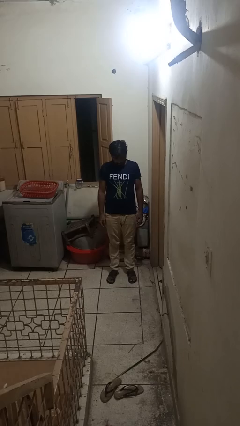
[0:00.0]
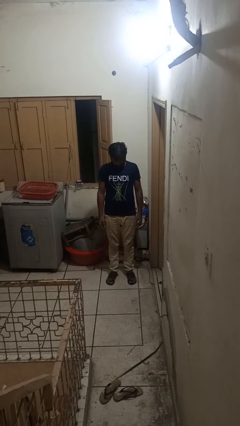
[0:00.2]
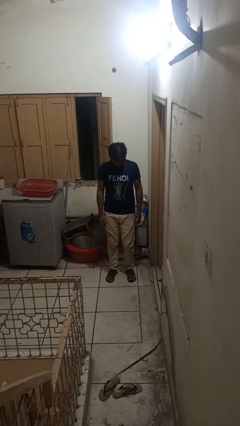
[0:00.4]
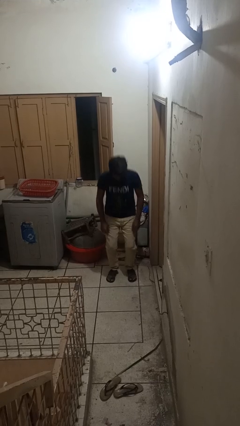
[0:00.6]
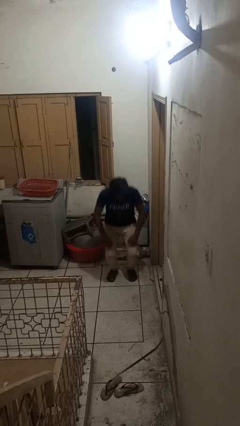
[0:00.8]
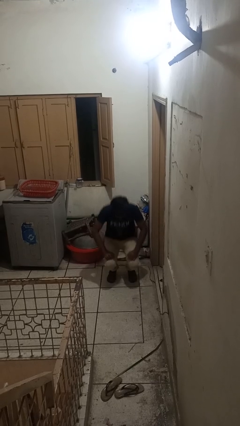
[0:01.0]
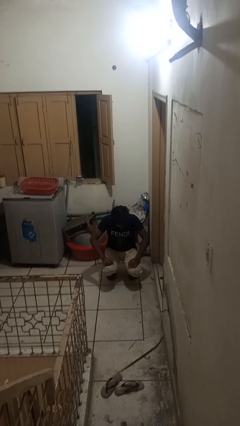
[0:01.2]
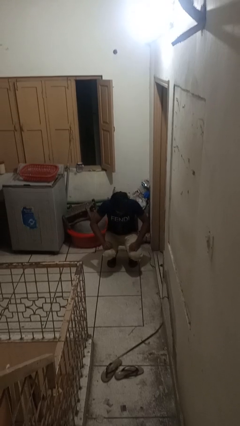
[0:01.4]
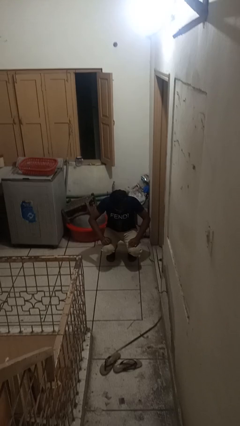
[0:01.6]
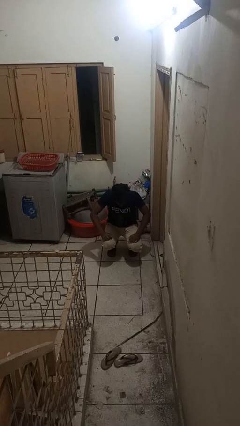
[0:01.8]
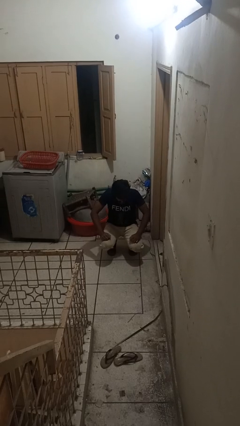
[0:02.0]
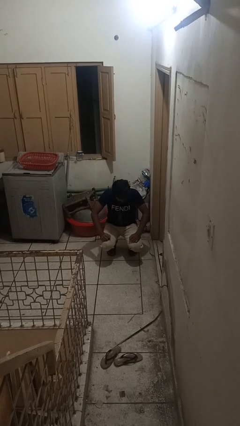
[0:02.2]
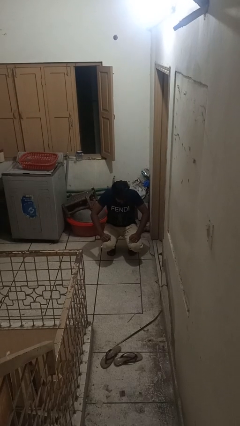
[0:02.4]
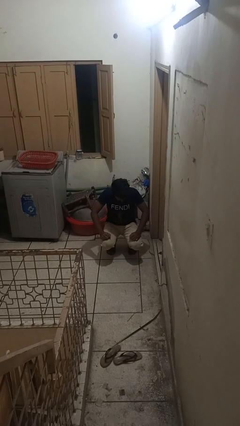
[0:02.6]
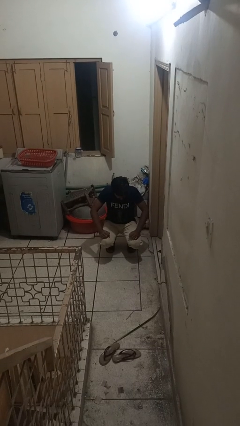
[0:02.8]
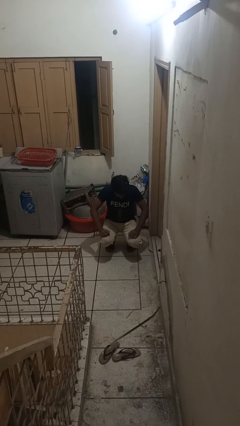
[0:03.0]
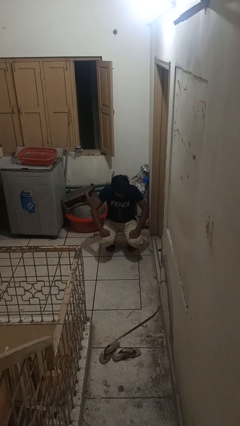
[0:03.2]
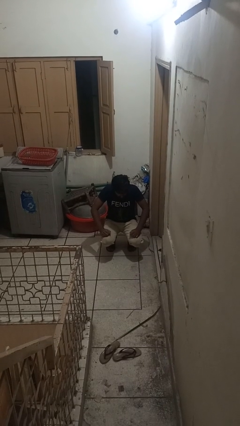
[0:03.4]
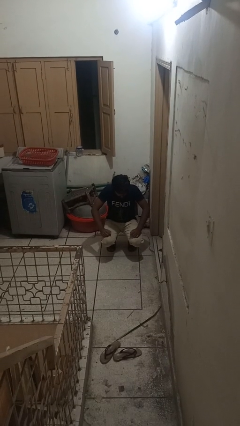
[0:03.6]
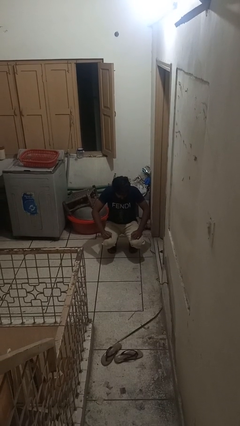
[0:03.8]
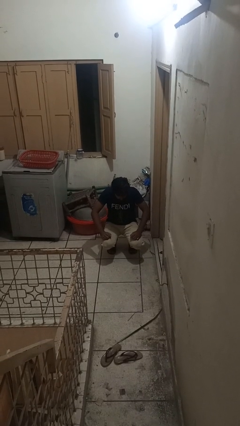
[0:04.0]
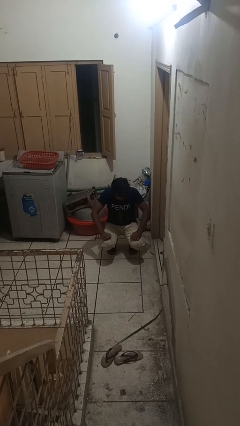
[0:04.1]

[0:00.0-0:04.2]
person squats

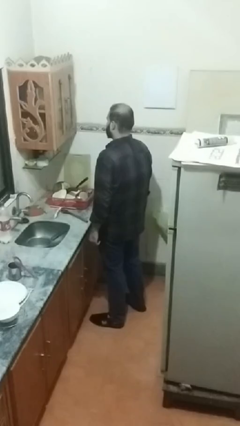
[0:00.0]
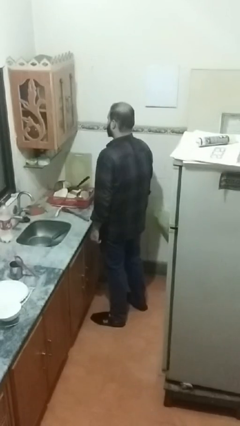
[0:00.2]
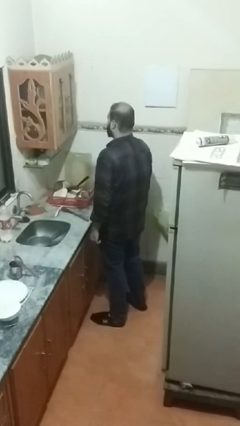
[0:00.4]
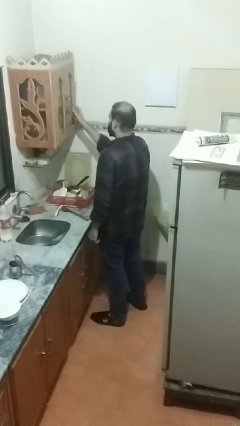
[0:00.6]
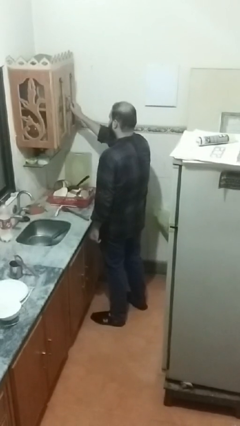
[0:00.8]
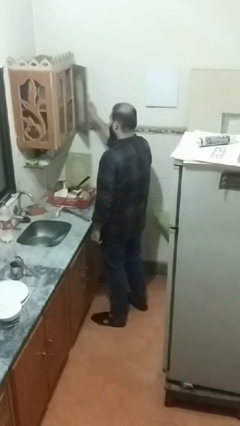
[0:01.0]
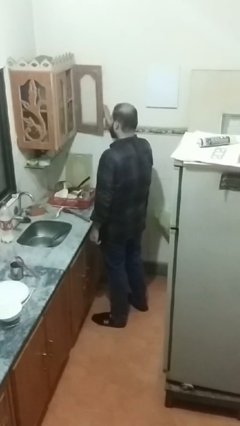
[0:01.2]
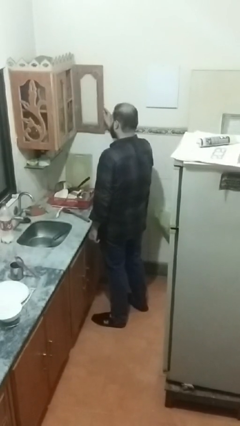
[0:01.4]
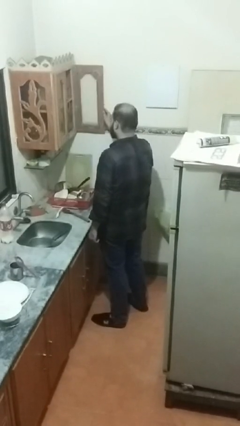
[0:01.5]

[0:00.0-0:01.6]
person opens kitchen drawer

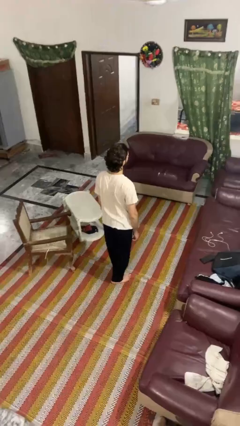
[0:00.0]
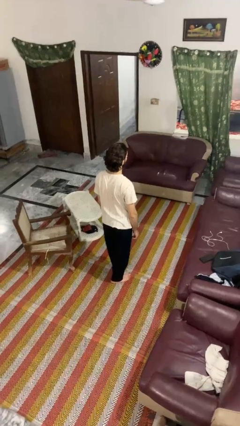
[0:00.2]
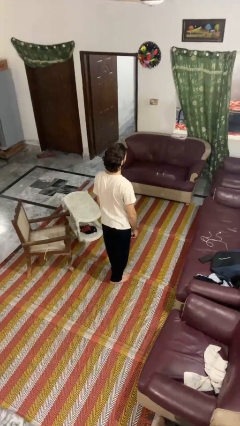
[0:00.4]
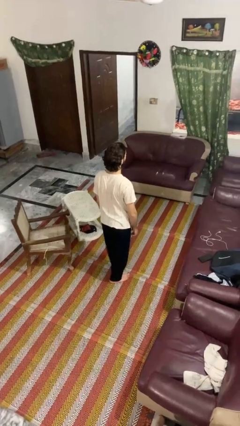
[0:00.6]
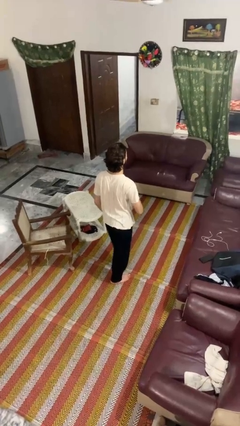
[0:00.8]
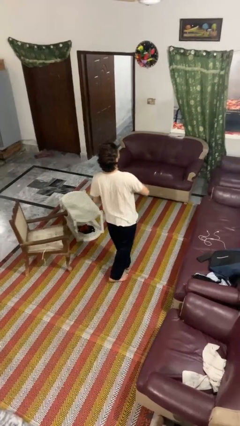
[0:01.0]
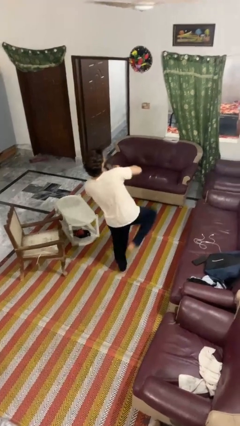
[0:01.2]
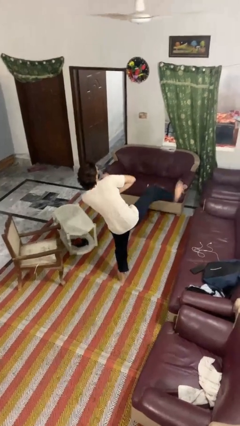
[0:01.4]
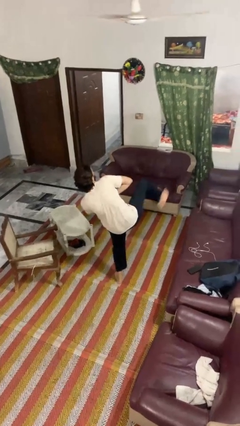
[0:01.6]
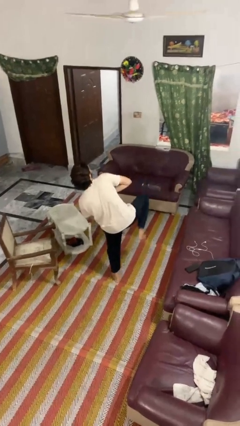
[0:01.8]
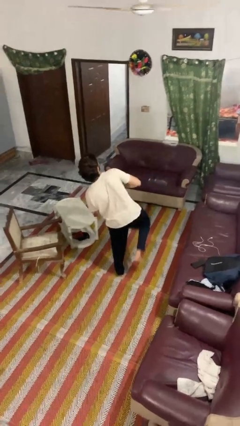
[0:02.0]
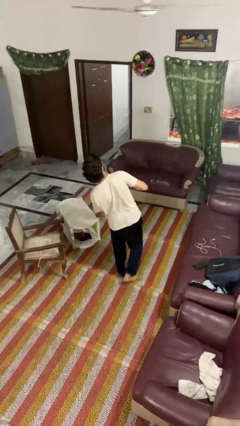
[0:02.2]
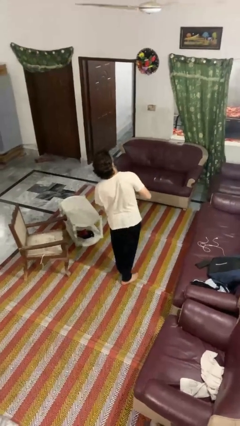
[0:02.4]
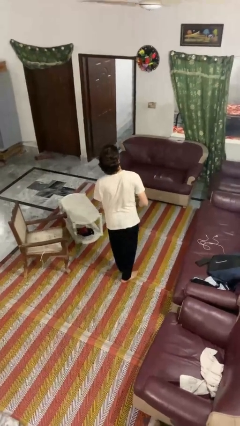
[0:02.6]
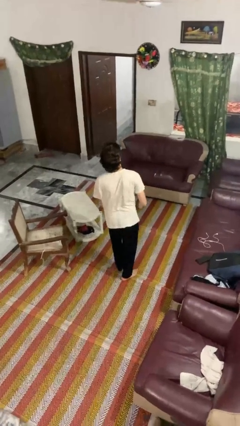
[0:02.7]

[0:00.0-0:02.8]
person karate kicks

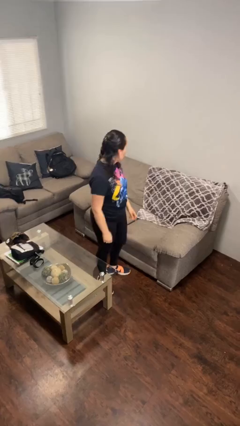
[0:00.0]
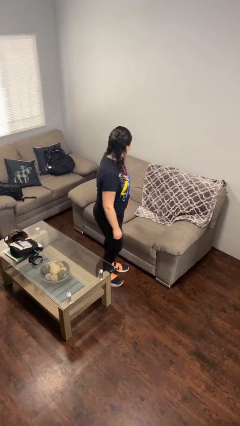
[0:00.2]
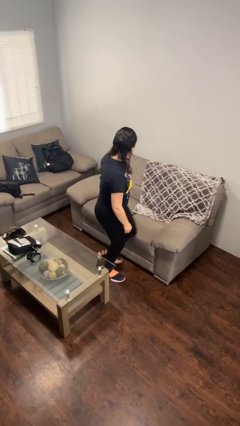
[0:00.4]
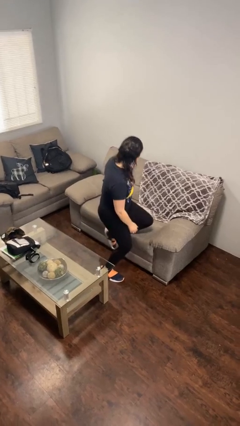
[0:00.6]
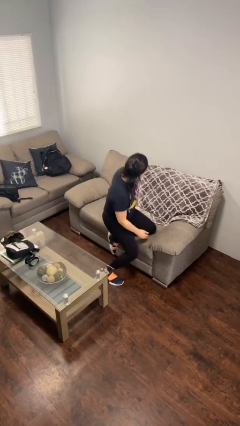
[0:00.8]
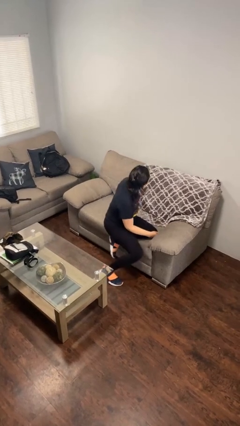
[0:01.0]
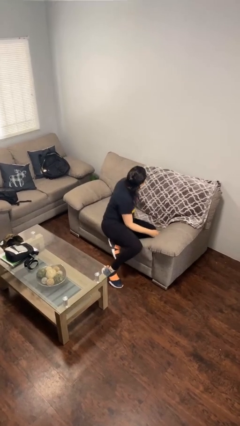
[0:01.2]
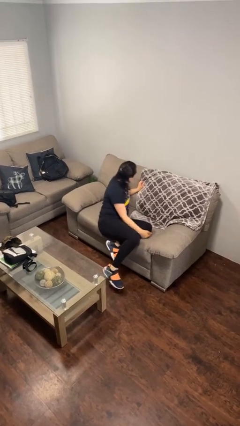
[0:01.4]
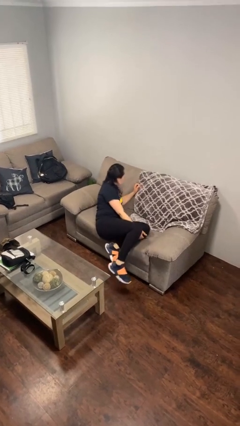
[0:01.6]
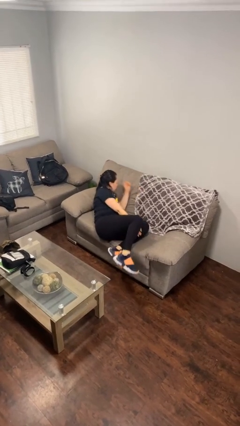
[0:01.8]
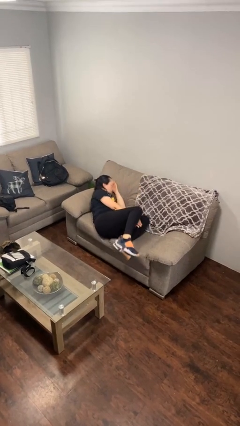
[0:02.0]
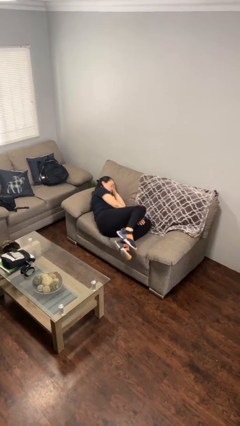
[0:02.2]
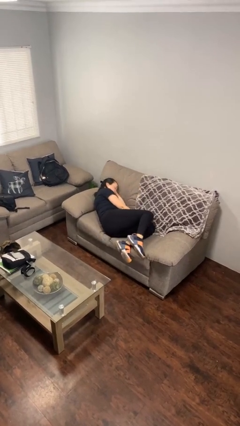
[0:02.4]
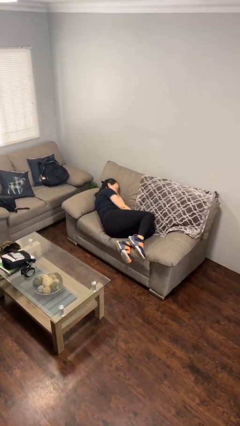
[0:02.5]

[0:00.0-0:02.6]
person lies down on couch

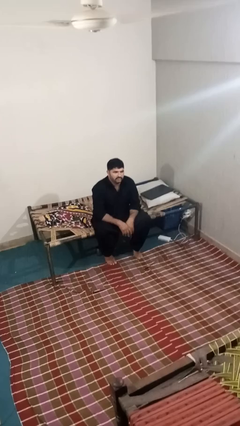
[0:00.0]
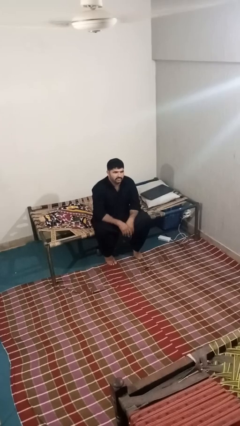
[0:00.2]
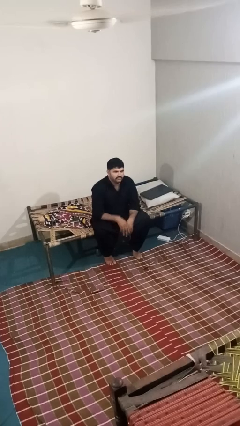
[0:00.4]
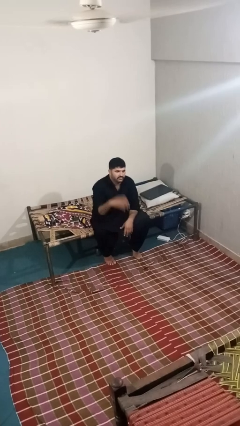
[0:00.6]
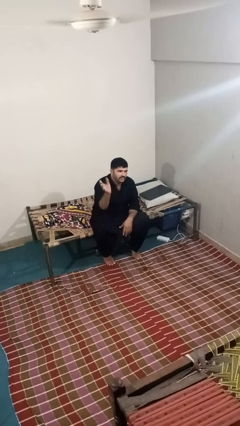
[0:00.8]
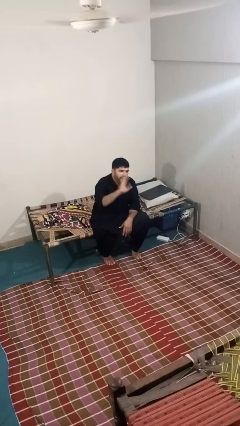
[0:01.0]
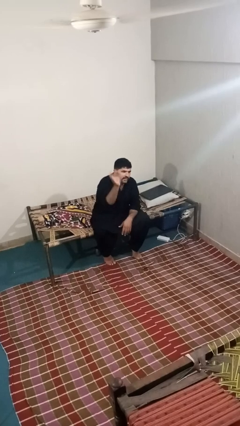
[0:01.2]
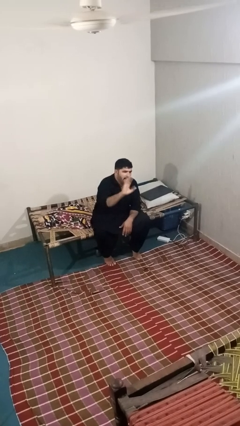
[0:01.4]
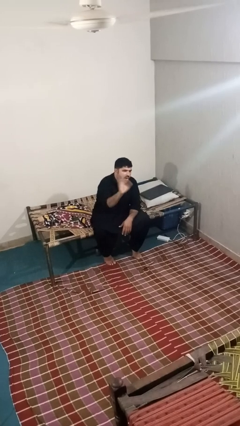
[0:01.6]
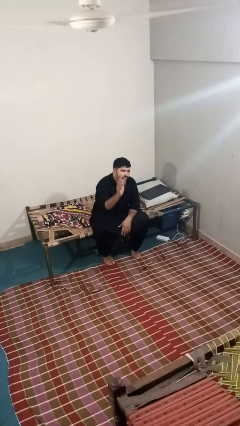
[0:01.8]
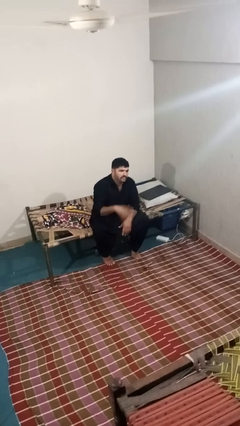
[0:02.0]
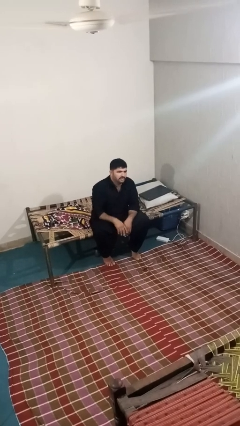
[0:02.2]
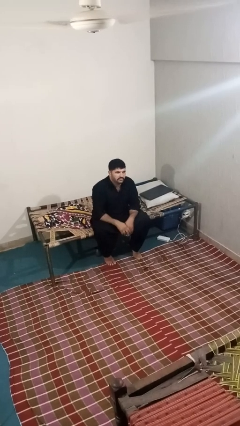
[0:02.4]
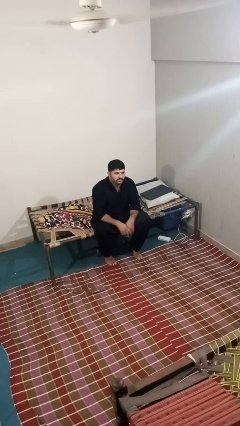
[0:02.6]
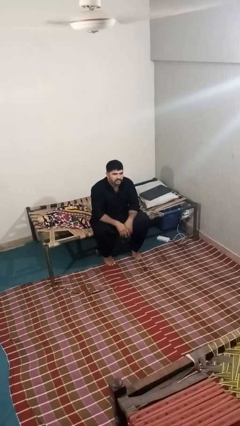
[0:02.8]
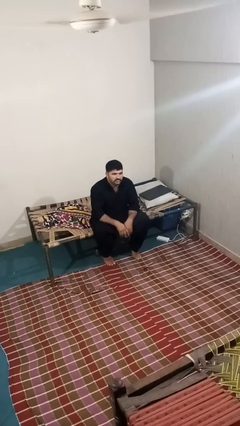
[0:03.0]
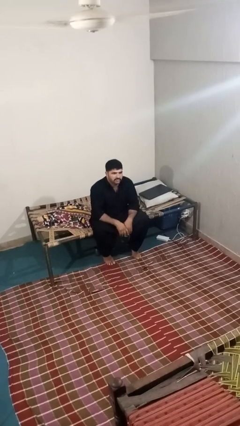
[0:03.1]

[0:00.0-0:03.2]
person waves at person

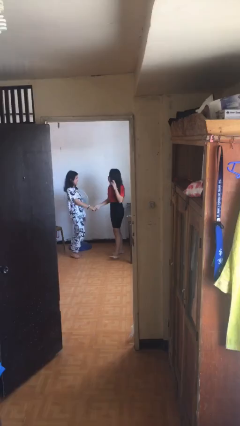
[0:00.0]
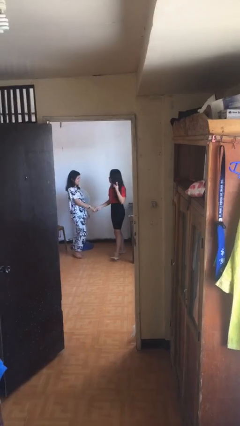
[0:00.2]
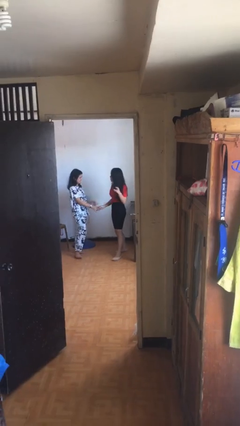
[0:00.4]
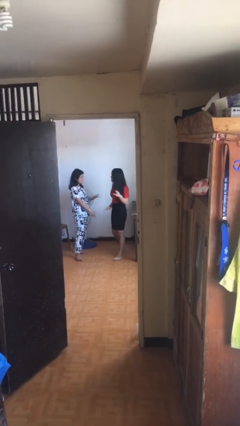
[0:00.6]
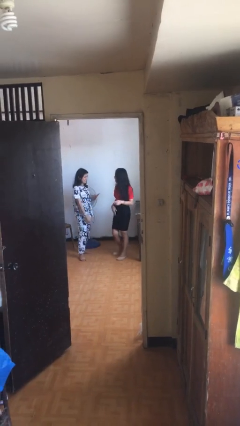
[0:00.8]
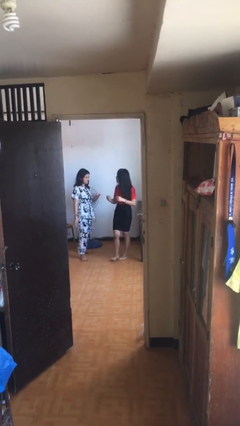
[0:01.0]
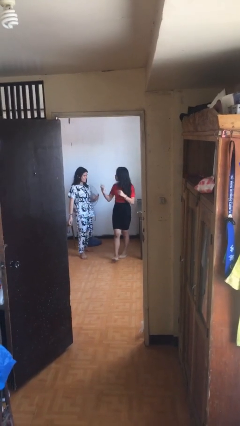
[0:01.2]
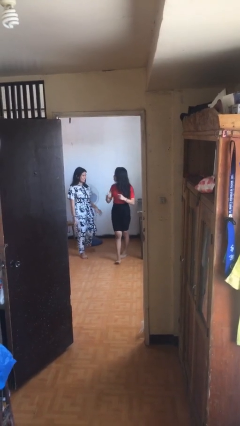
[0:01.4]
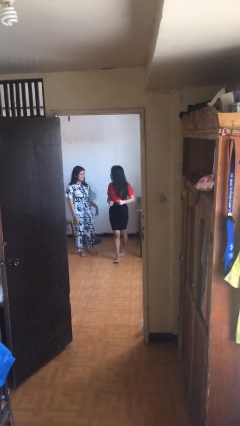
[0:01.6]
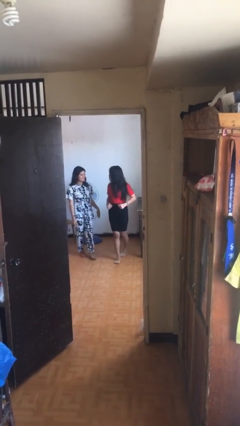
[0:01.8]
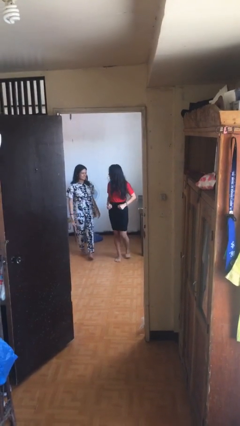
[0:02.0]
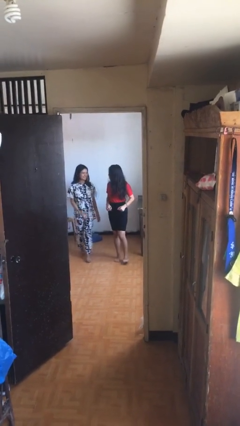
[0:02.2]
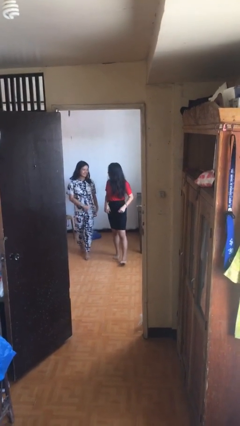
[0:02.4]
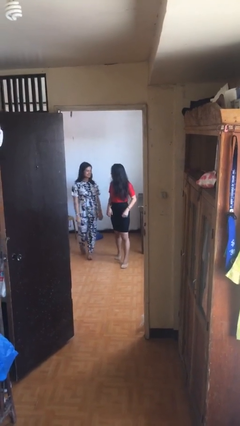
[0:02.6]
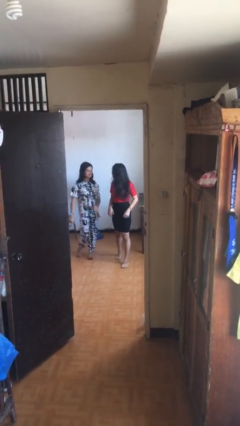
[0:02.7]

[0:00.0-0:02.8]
person talks to person
